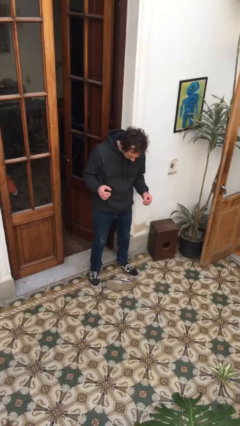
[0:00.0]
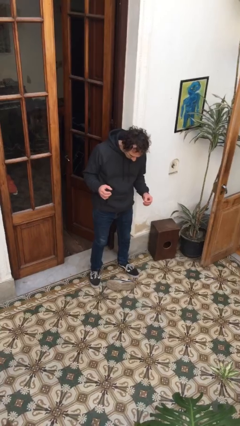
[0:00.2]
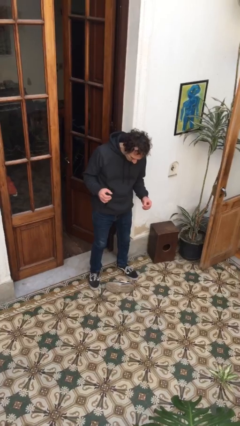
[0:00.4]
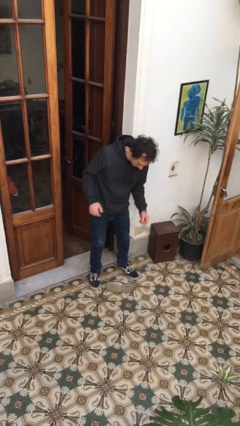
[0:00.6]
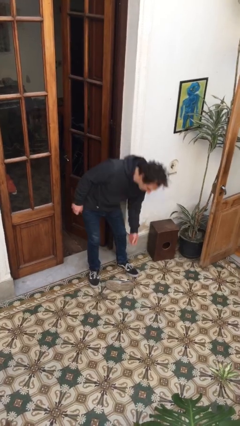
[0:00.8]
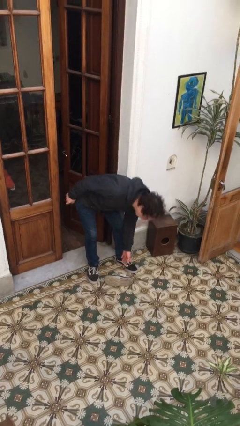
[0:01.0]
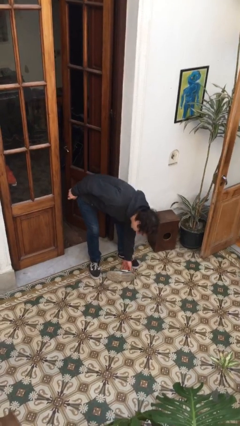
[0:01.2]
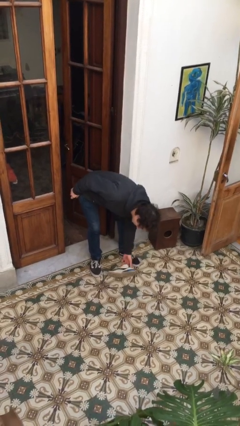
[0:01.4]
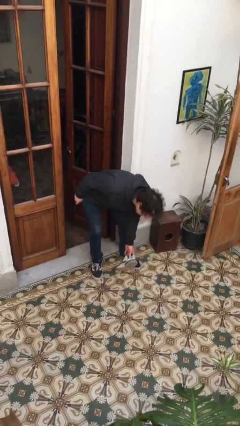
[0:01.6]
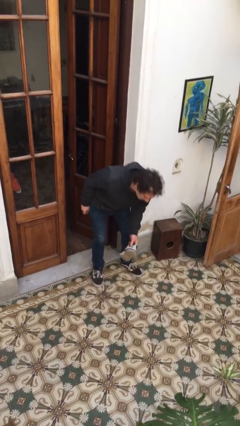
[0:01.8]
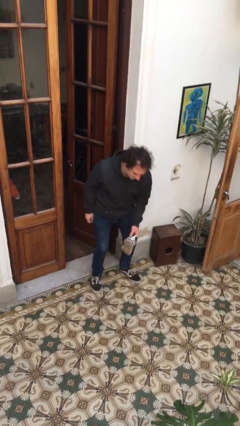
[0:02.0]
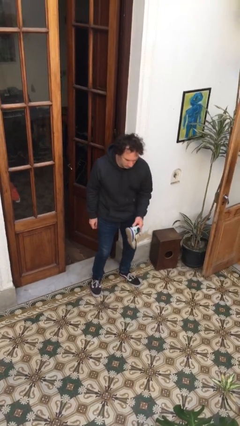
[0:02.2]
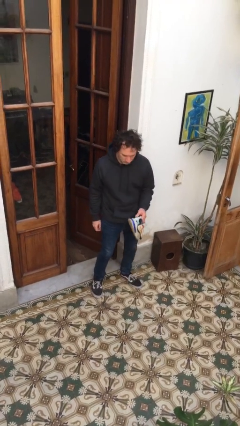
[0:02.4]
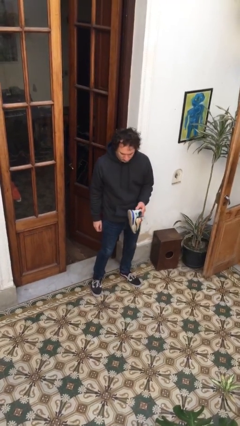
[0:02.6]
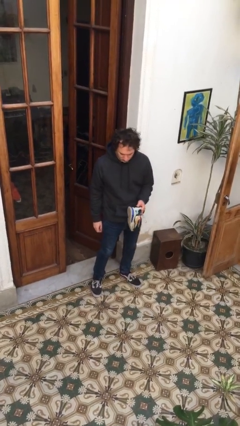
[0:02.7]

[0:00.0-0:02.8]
person picks up object from floor

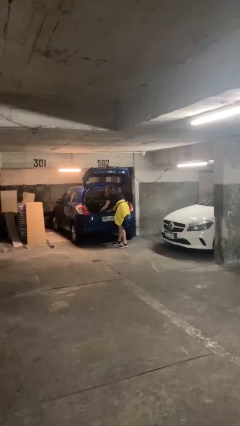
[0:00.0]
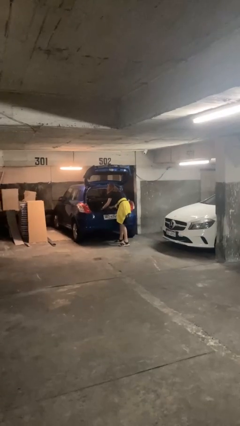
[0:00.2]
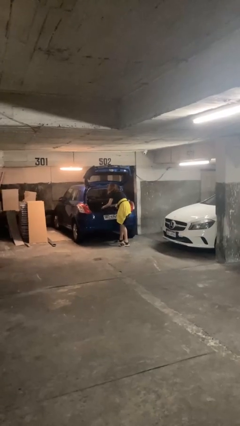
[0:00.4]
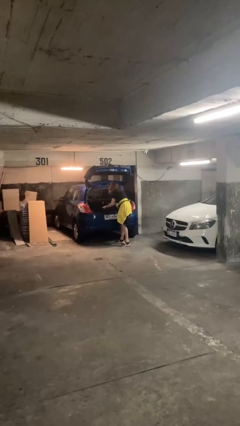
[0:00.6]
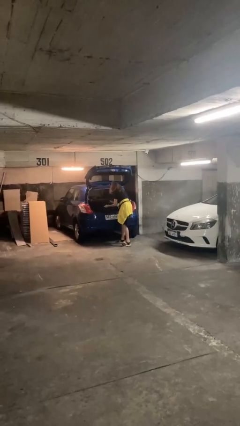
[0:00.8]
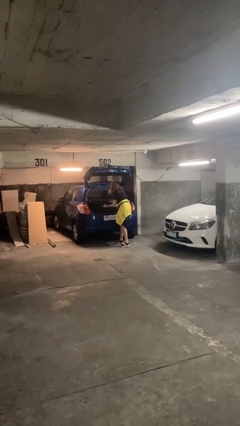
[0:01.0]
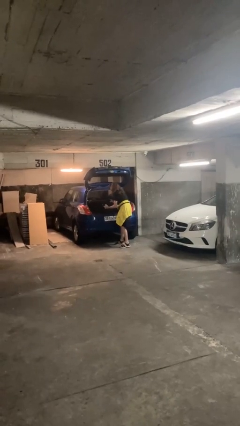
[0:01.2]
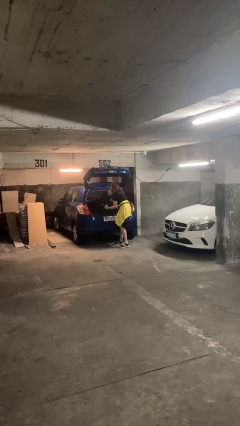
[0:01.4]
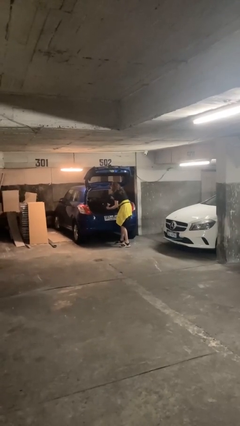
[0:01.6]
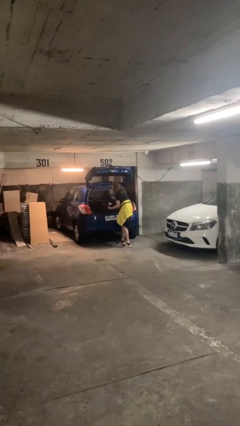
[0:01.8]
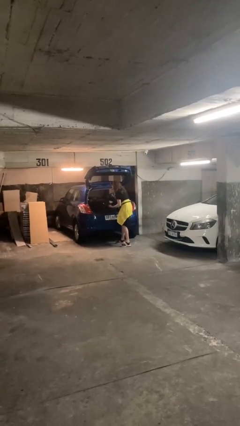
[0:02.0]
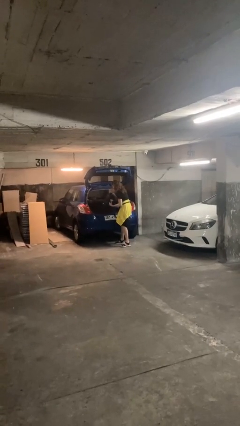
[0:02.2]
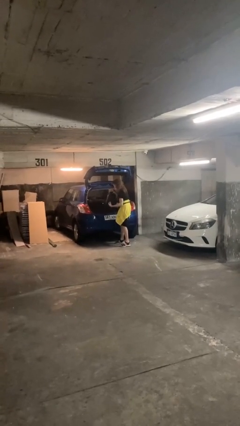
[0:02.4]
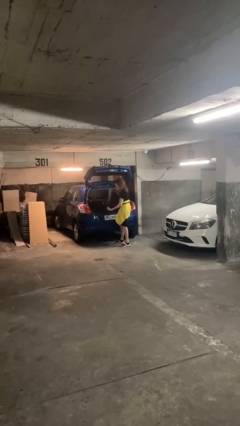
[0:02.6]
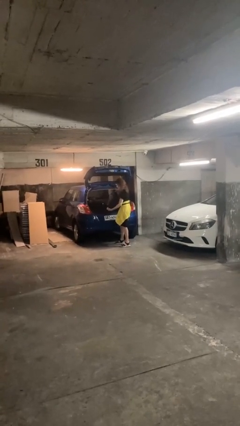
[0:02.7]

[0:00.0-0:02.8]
person unloads car

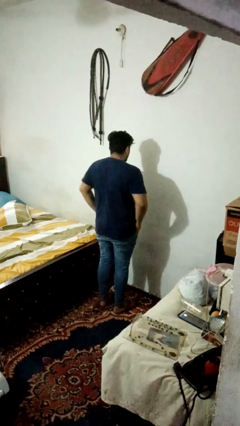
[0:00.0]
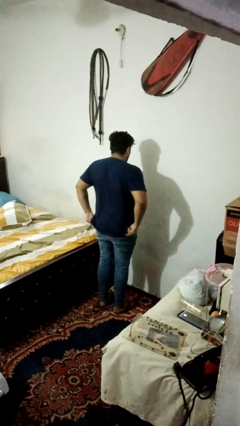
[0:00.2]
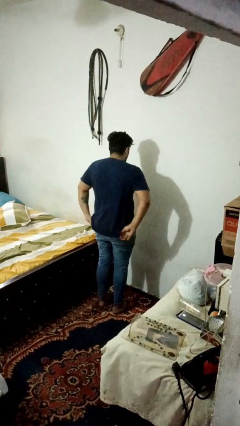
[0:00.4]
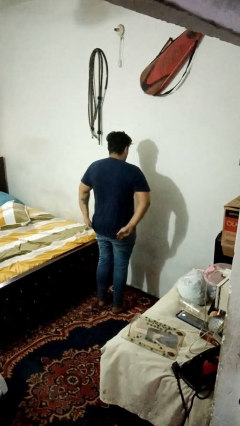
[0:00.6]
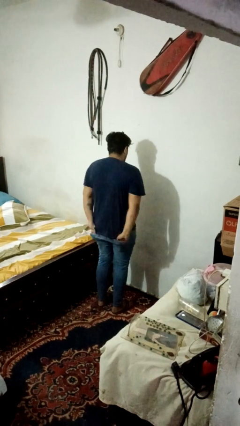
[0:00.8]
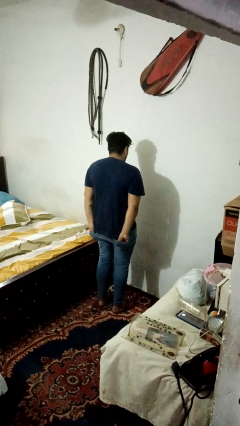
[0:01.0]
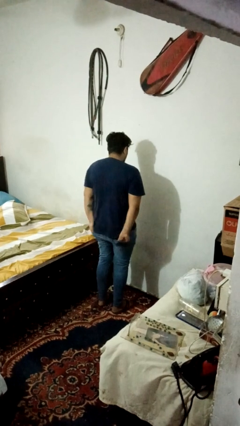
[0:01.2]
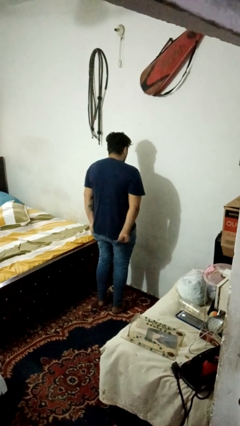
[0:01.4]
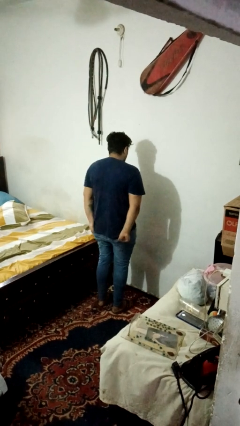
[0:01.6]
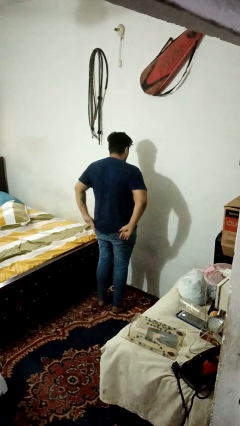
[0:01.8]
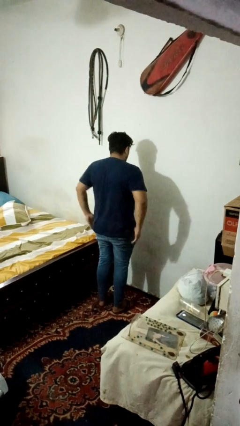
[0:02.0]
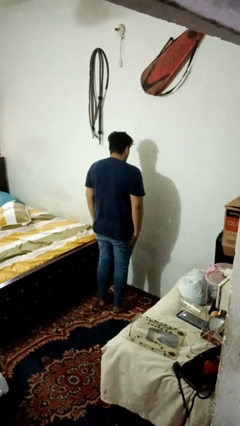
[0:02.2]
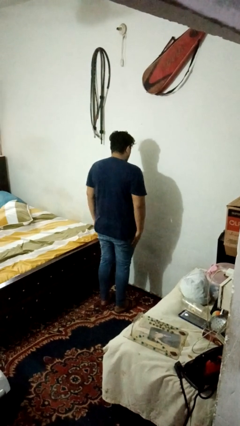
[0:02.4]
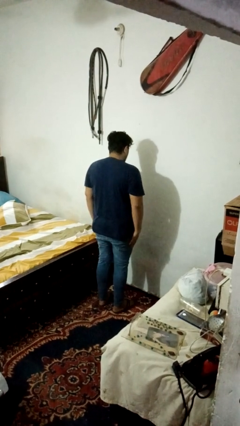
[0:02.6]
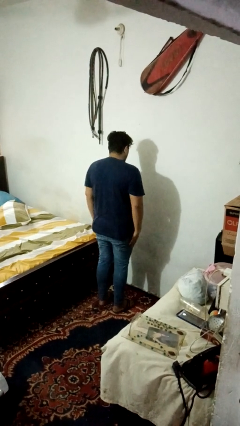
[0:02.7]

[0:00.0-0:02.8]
person puts hands in back pockets

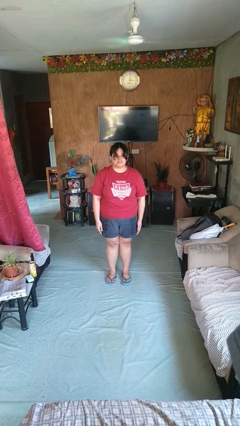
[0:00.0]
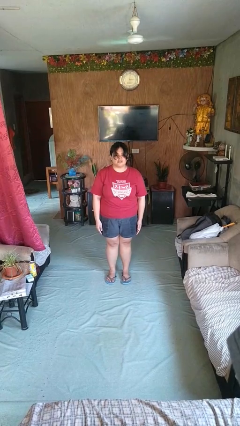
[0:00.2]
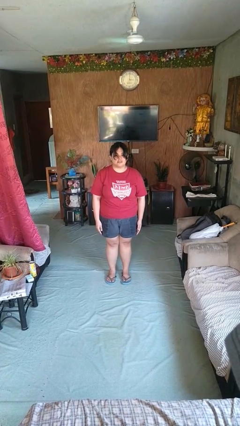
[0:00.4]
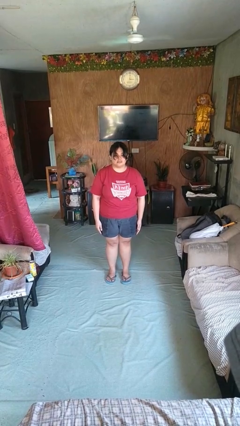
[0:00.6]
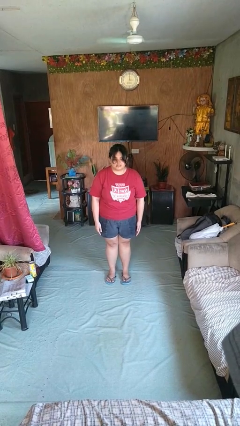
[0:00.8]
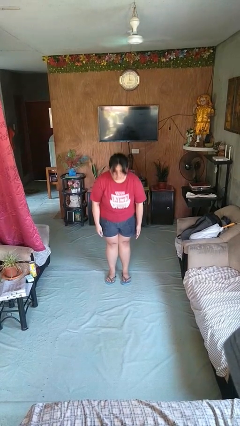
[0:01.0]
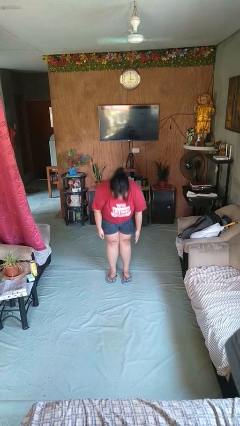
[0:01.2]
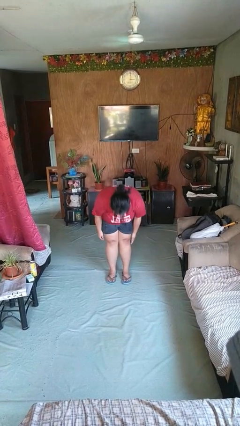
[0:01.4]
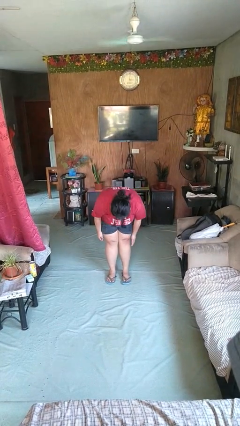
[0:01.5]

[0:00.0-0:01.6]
person bows

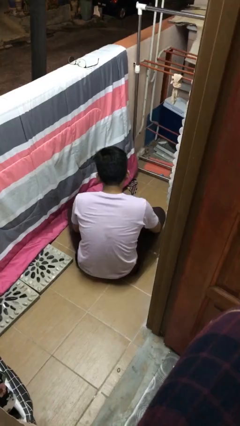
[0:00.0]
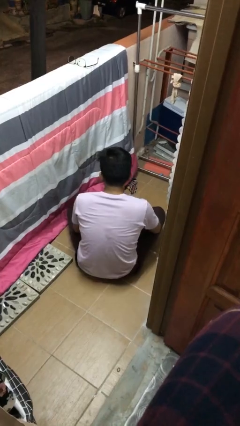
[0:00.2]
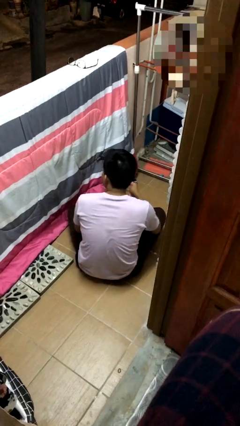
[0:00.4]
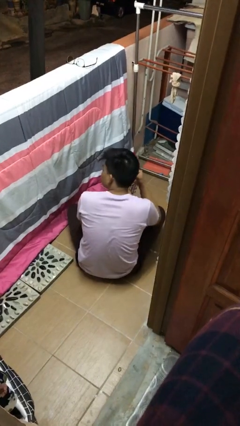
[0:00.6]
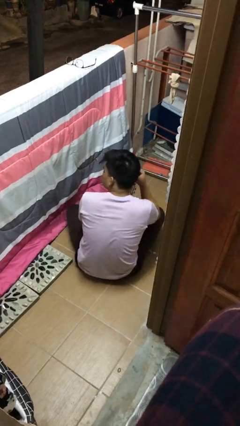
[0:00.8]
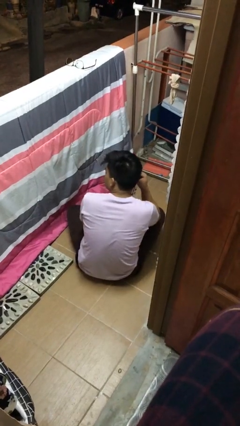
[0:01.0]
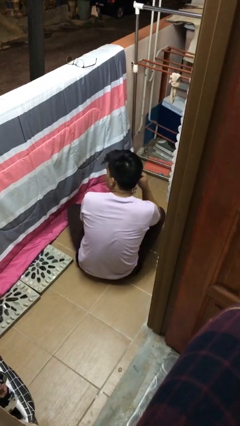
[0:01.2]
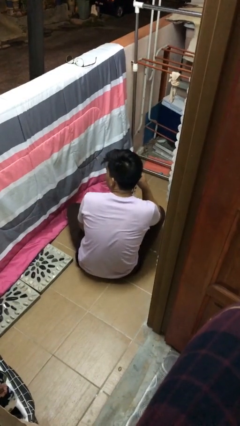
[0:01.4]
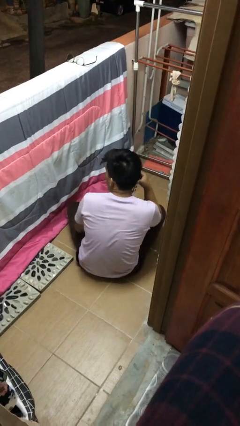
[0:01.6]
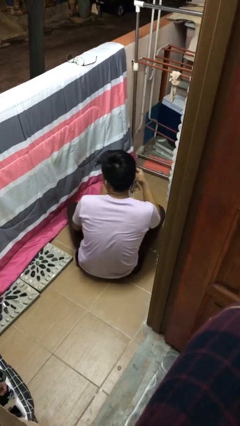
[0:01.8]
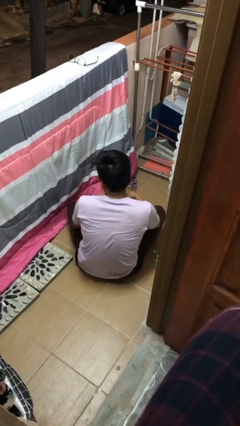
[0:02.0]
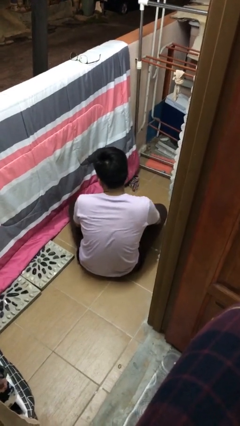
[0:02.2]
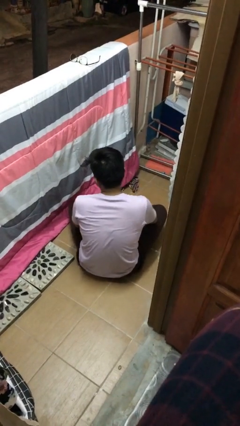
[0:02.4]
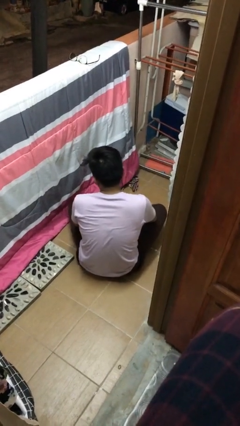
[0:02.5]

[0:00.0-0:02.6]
person puts on earrings

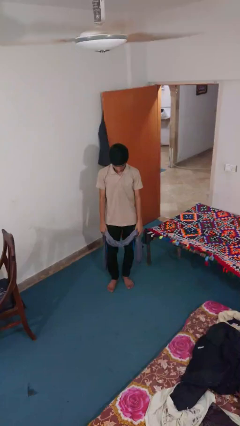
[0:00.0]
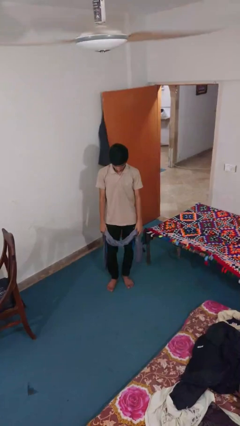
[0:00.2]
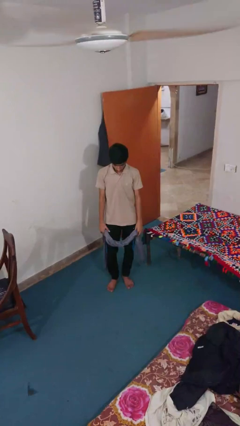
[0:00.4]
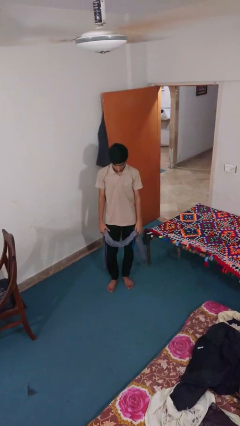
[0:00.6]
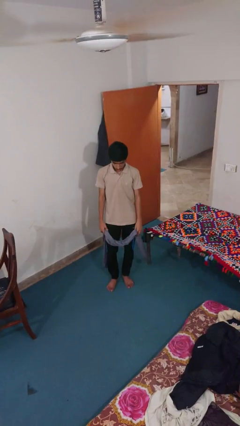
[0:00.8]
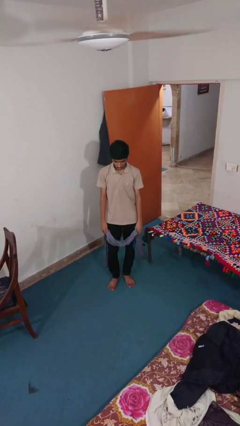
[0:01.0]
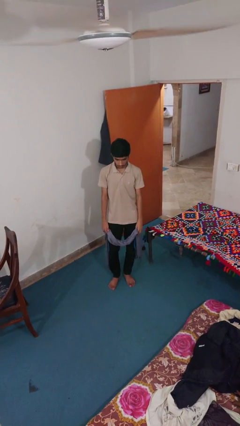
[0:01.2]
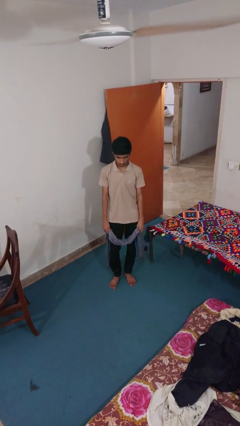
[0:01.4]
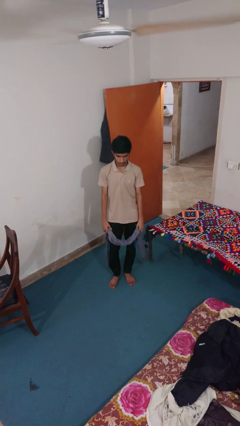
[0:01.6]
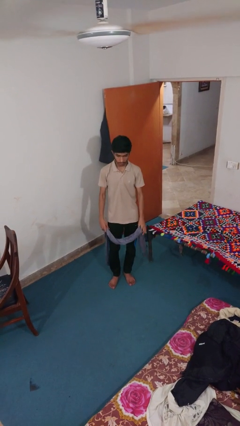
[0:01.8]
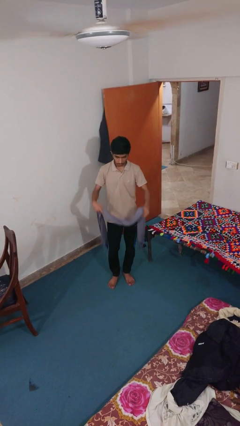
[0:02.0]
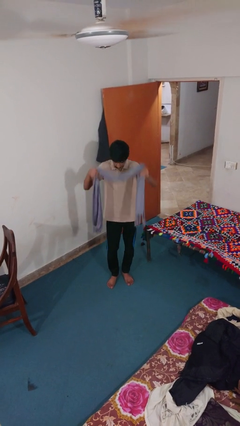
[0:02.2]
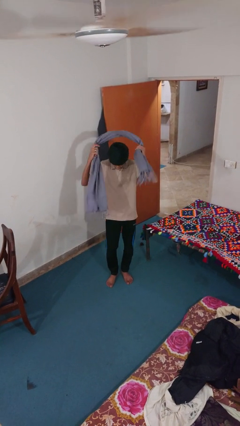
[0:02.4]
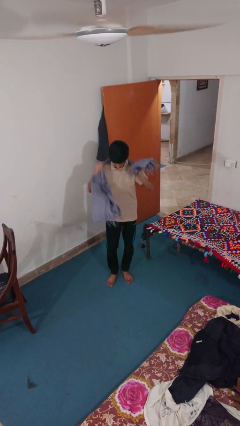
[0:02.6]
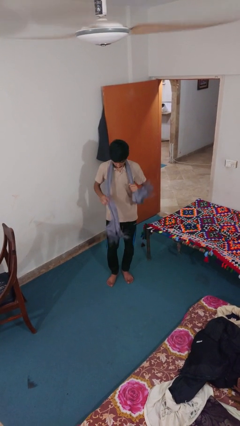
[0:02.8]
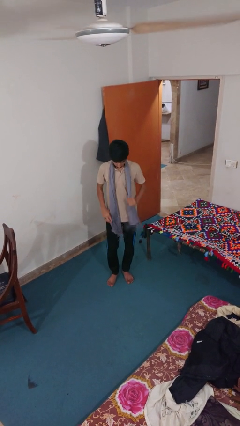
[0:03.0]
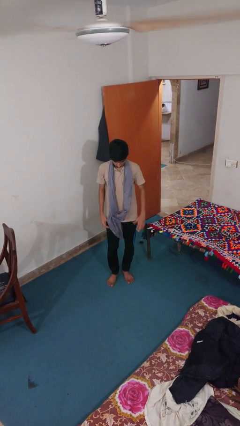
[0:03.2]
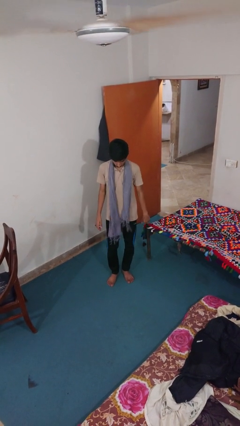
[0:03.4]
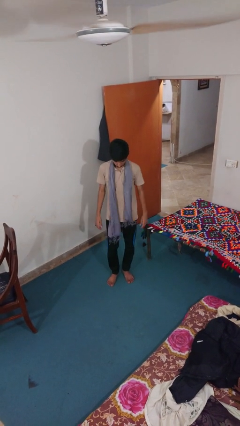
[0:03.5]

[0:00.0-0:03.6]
person puts on scarf

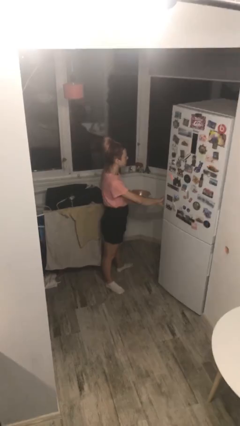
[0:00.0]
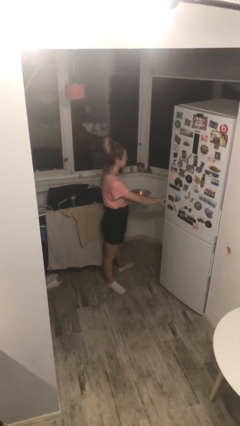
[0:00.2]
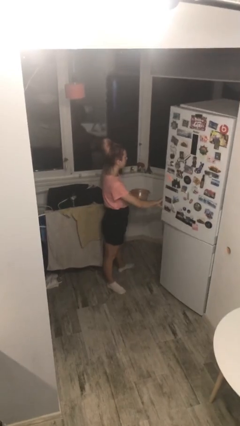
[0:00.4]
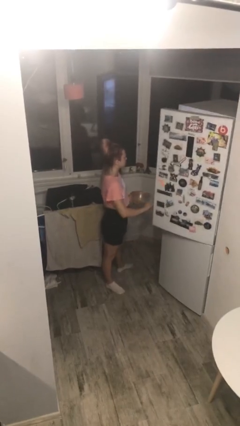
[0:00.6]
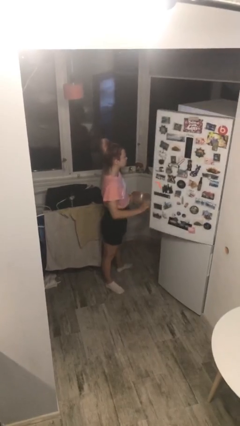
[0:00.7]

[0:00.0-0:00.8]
person opens refrigerator
